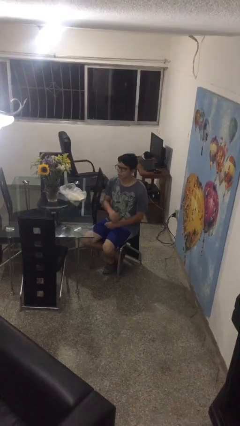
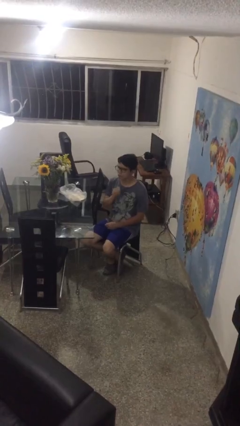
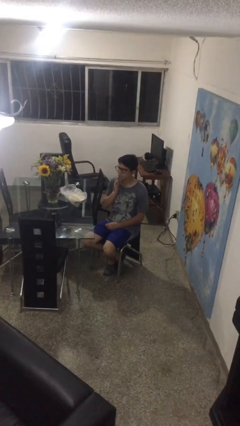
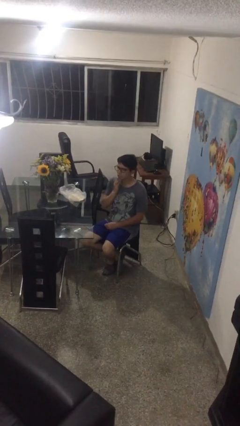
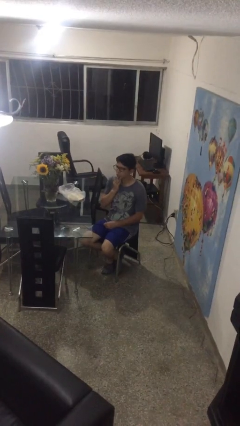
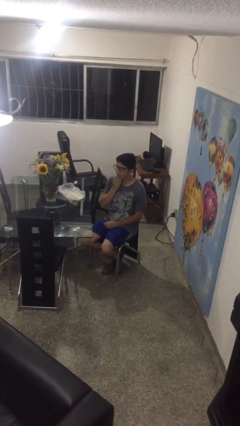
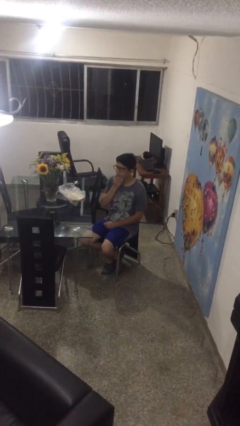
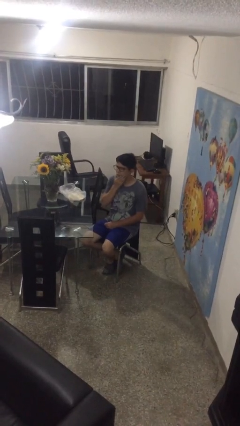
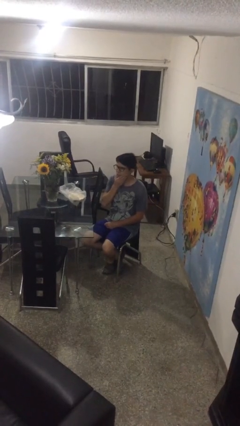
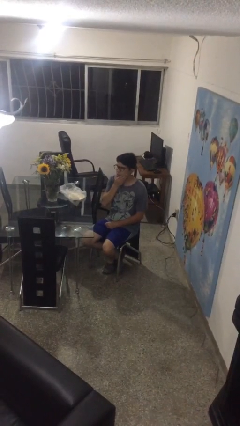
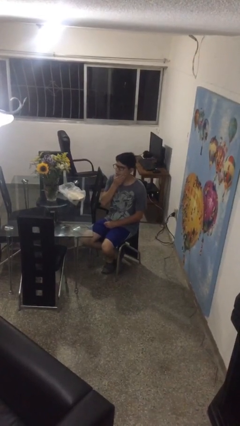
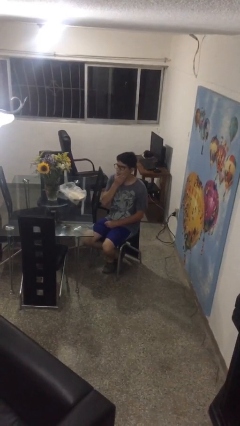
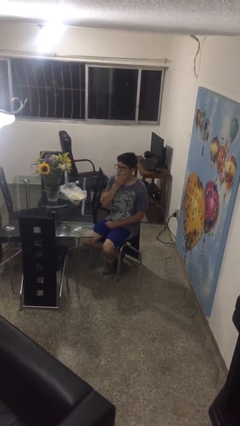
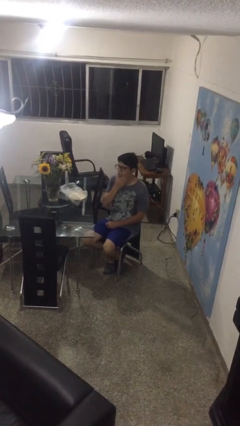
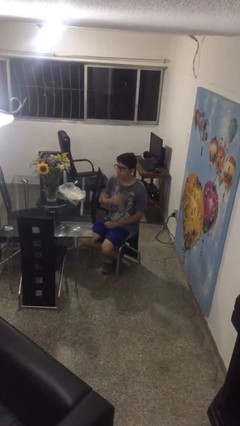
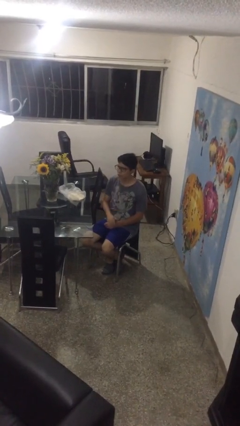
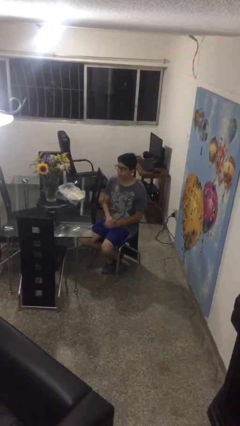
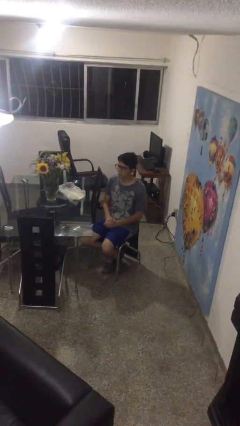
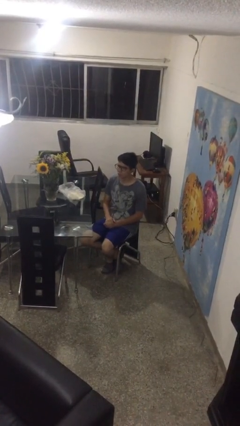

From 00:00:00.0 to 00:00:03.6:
person strokes chin

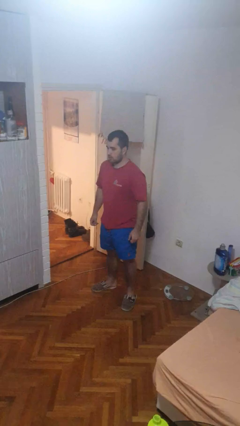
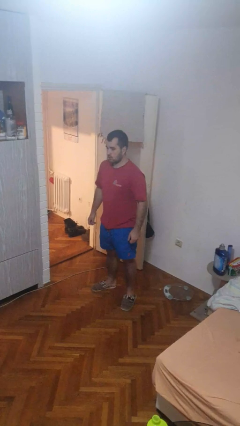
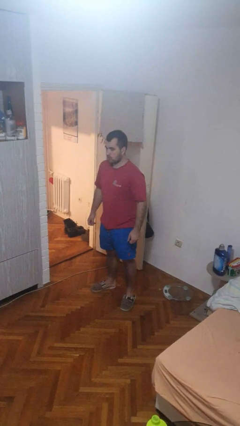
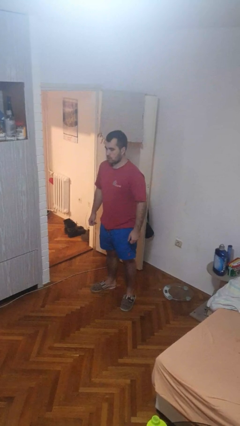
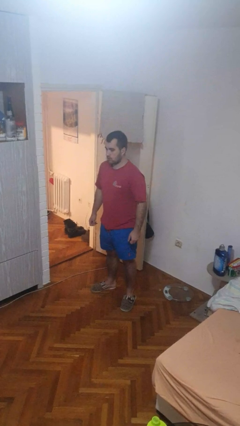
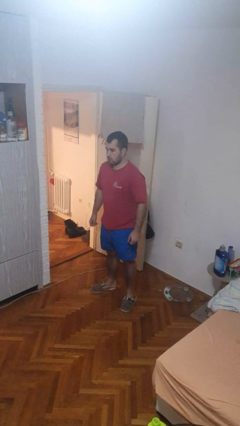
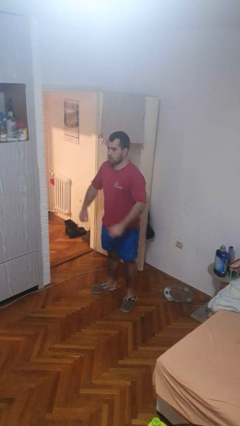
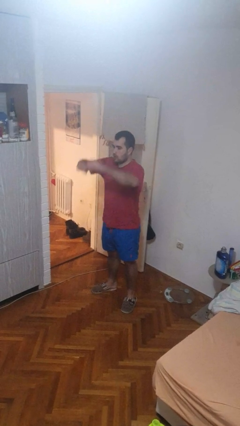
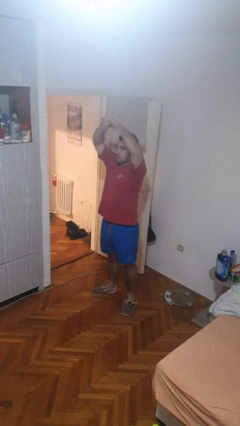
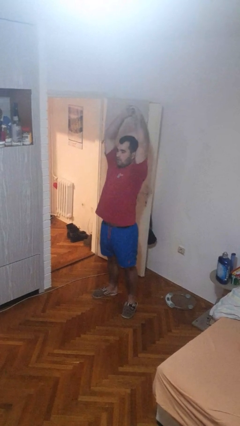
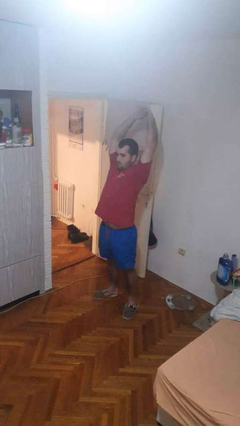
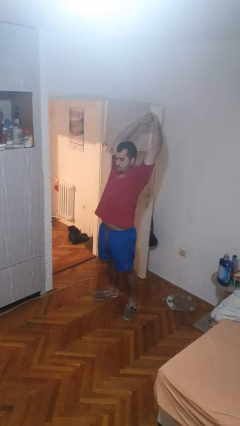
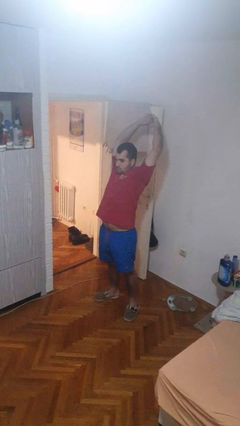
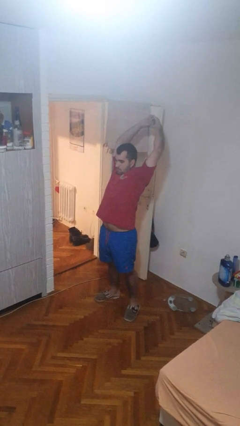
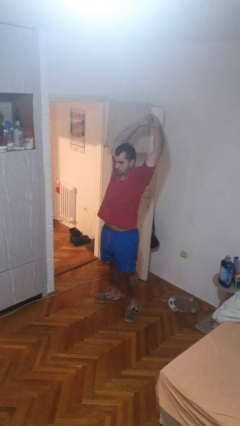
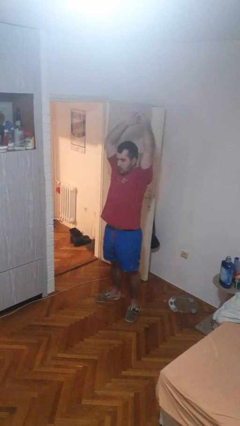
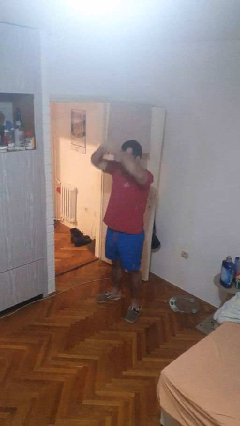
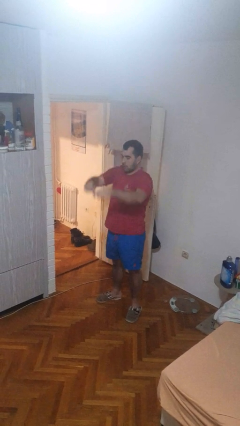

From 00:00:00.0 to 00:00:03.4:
person stretches arms over head

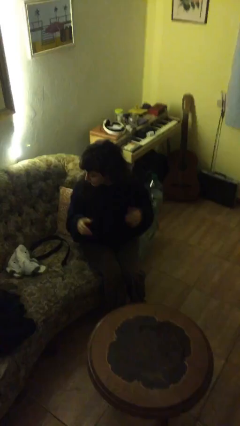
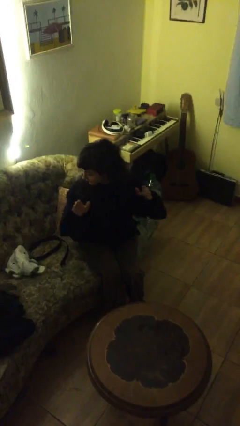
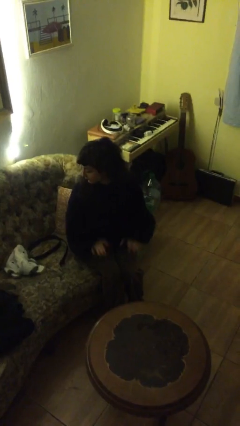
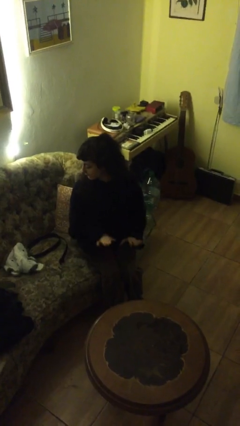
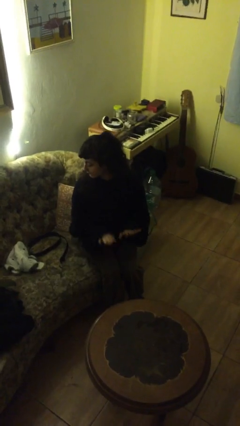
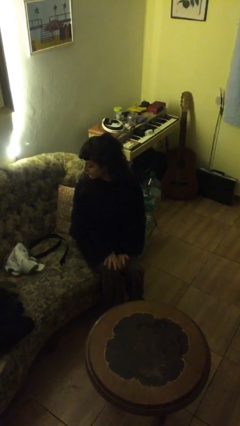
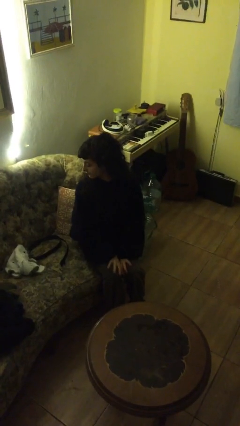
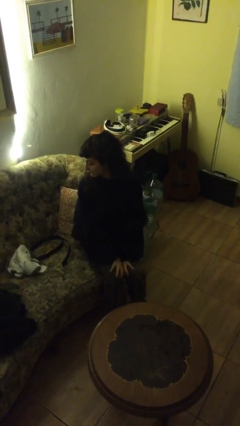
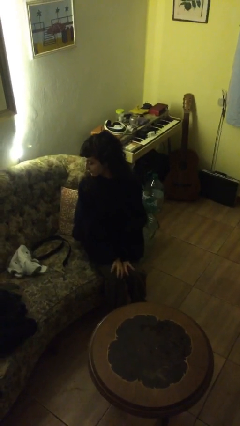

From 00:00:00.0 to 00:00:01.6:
person slaps hands on thighs

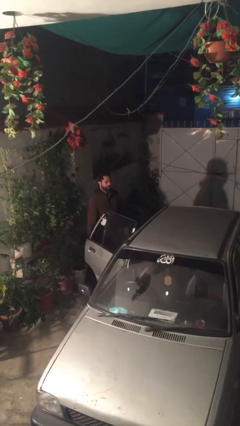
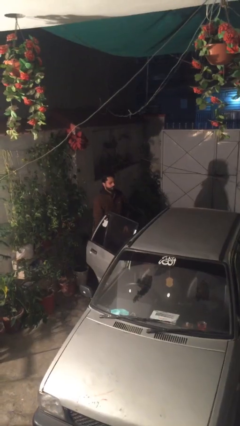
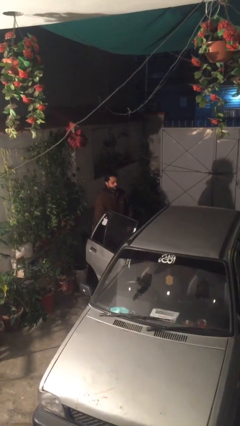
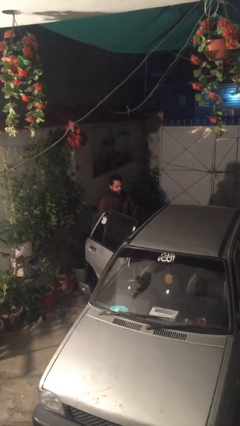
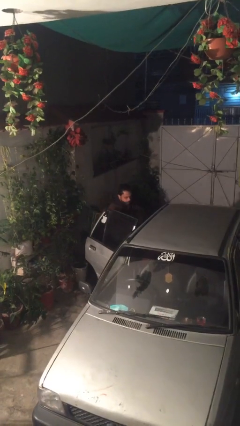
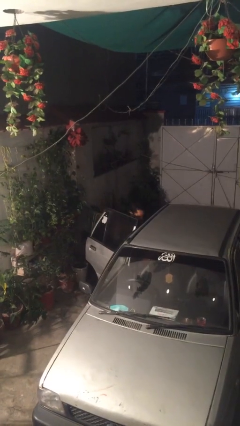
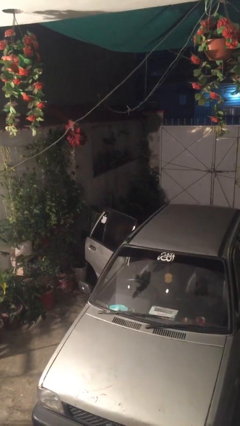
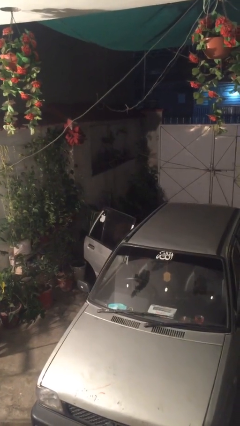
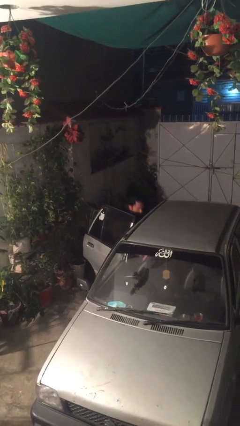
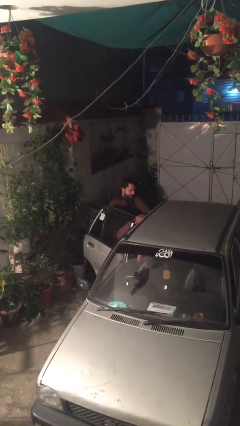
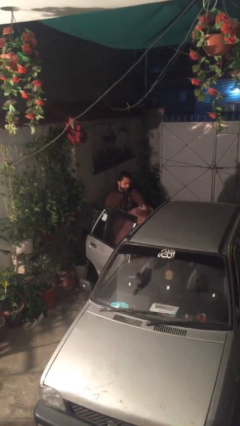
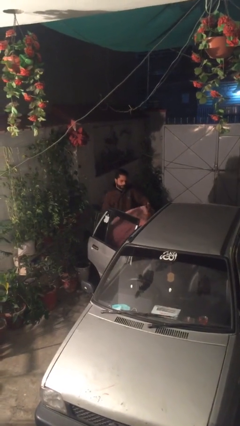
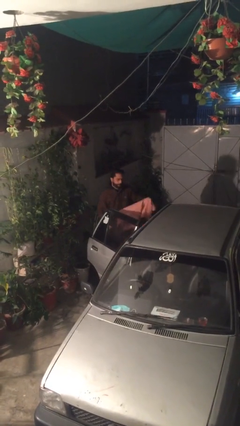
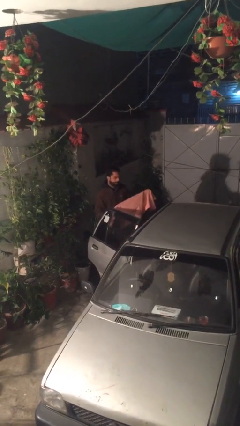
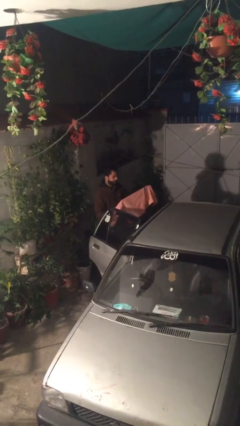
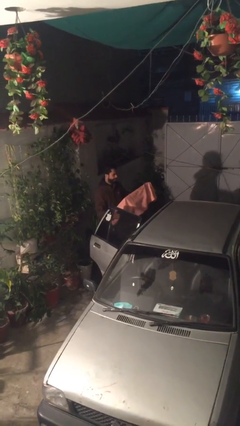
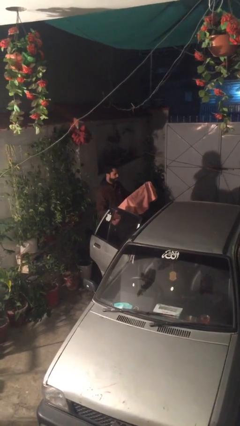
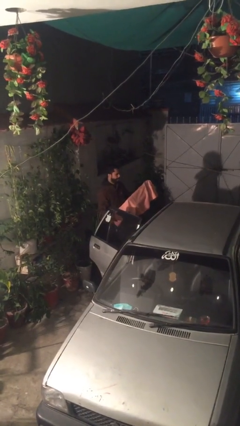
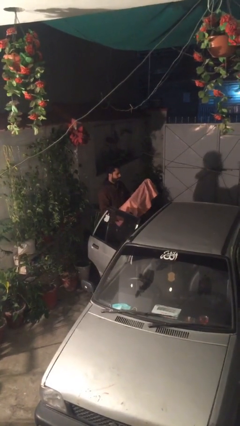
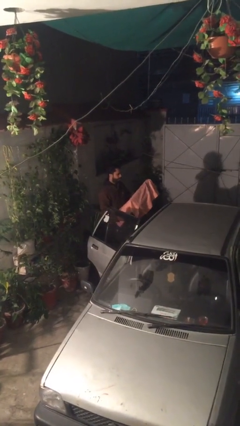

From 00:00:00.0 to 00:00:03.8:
person unloads car

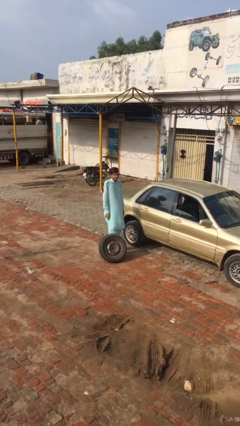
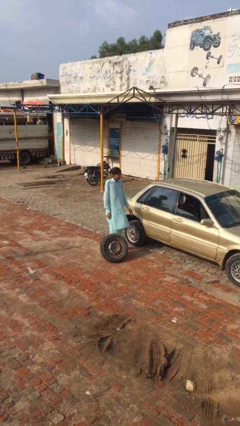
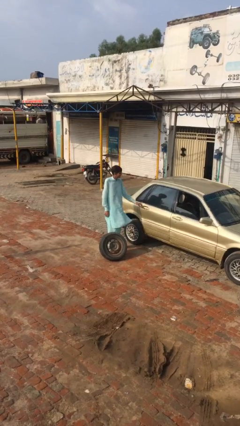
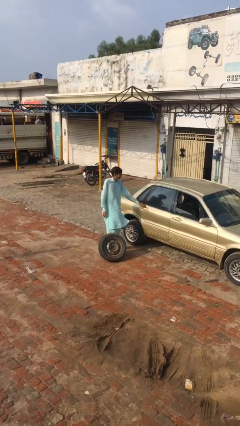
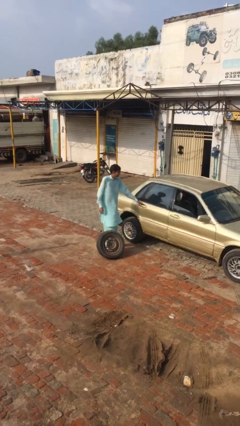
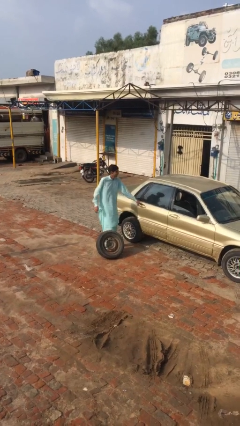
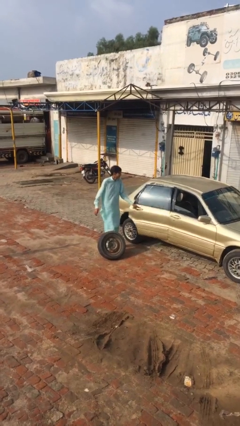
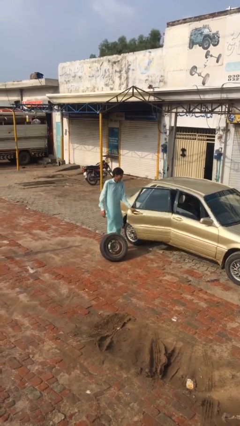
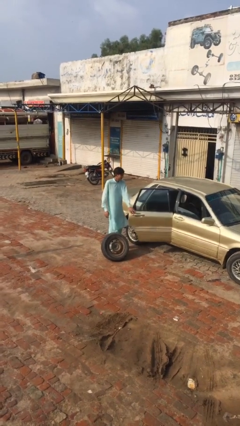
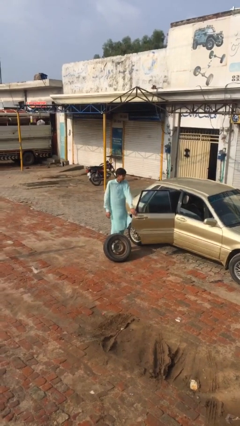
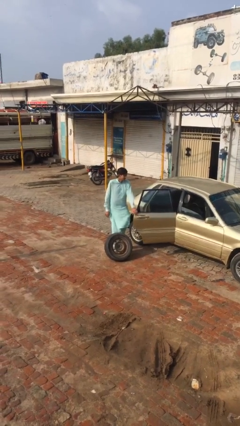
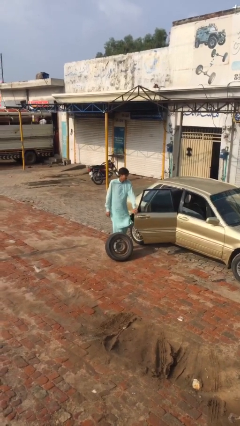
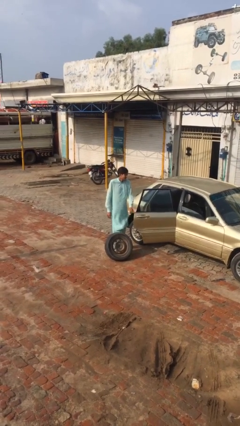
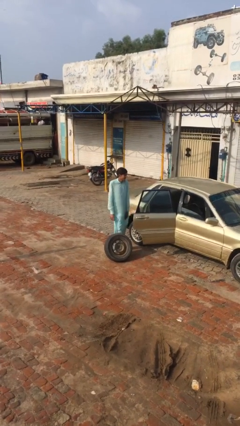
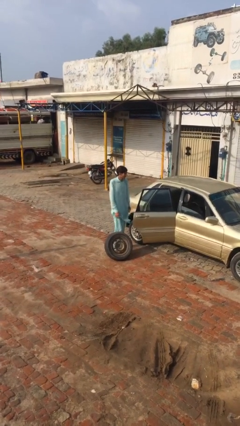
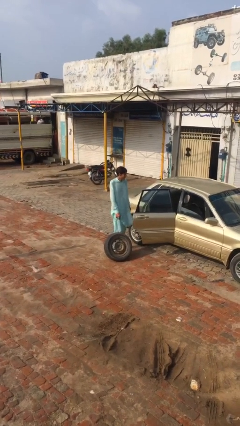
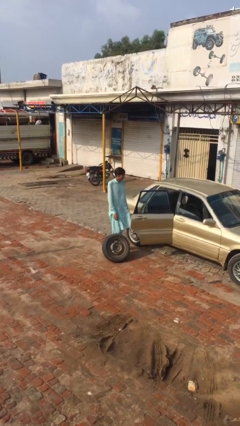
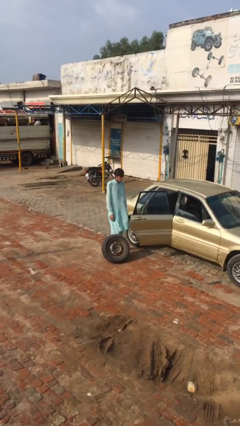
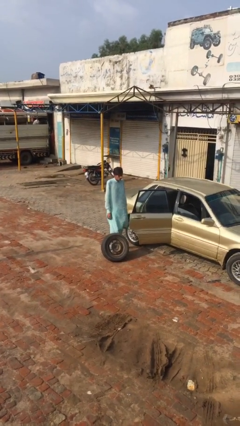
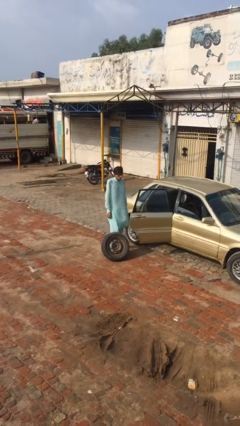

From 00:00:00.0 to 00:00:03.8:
person opens car door

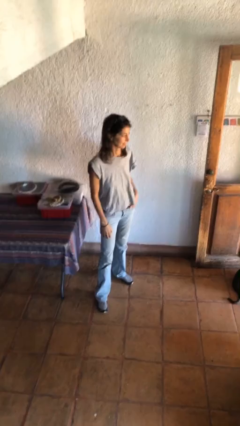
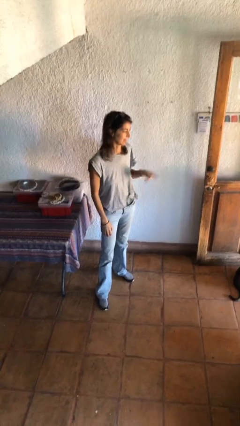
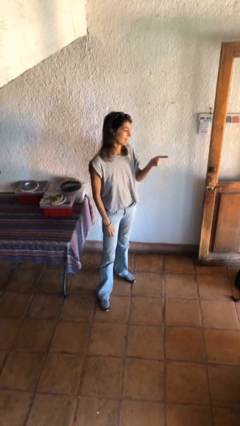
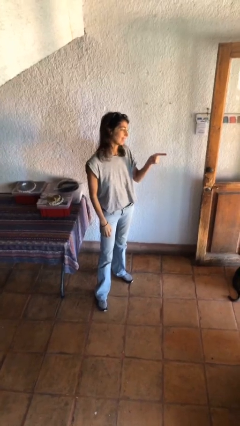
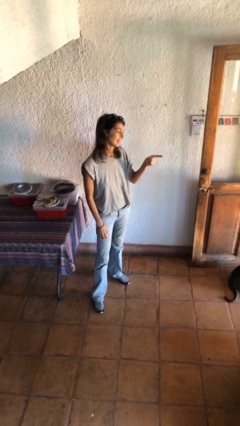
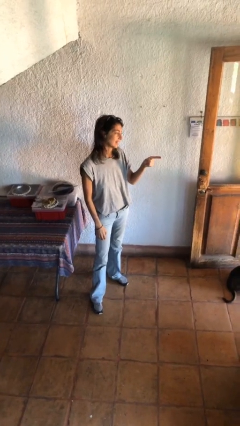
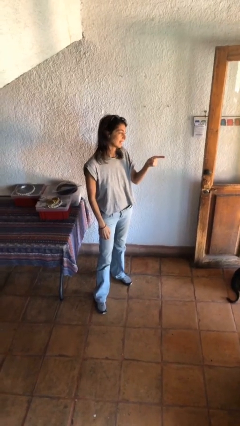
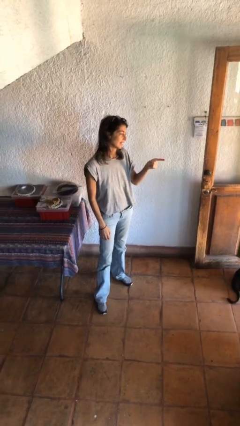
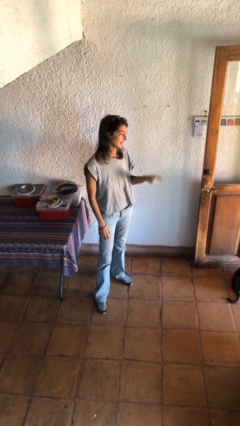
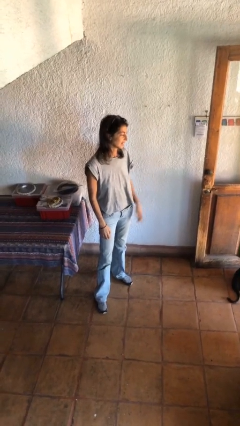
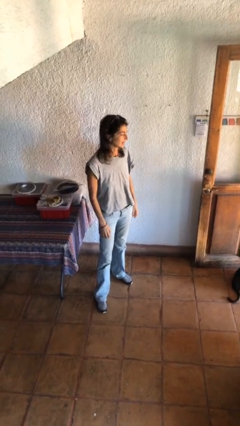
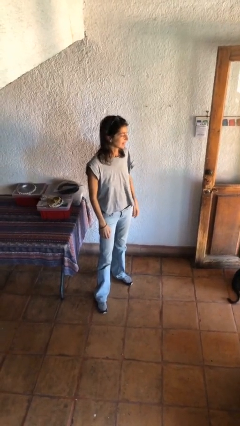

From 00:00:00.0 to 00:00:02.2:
person points at person
